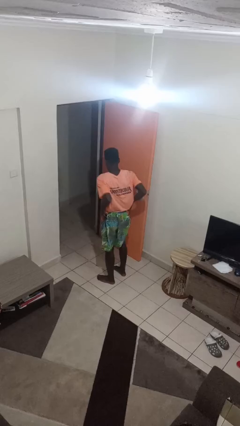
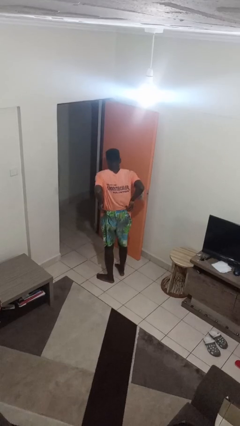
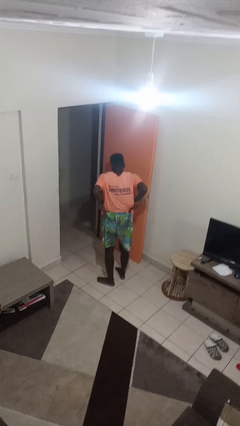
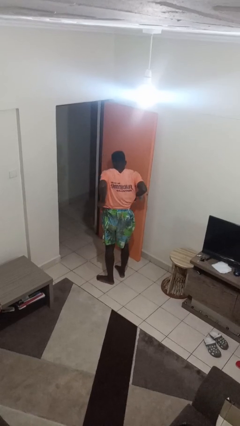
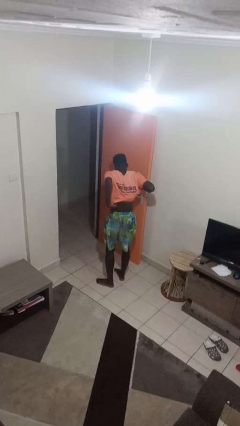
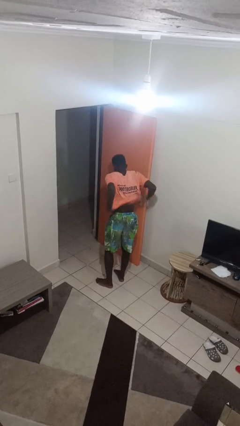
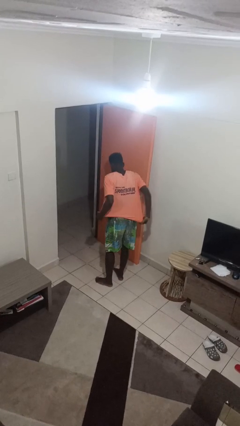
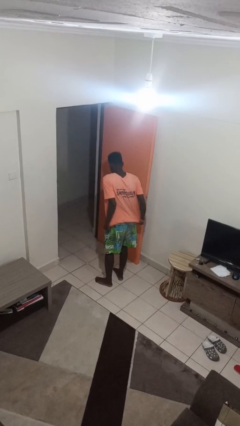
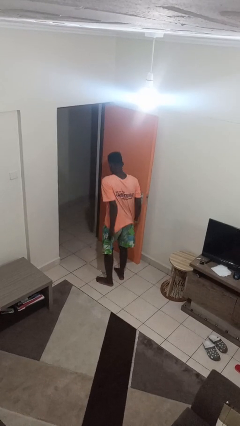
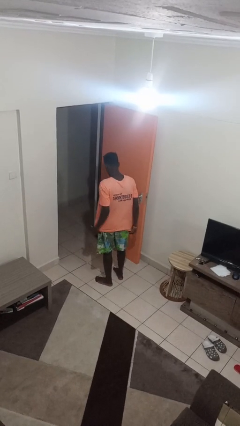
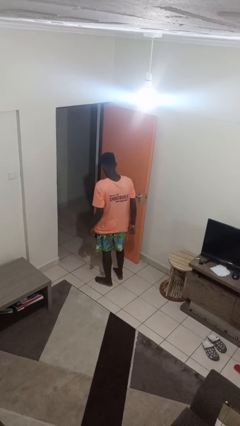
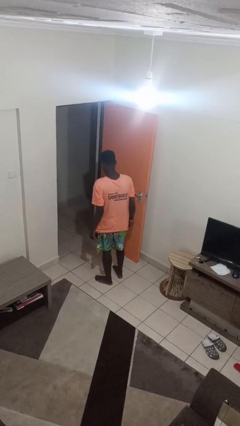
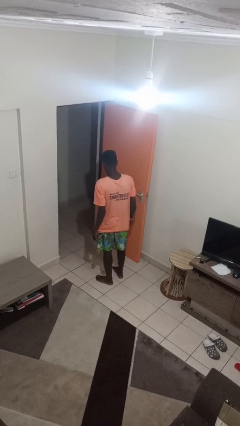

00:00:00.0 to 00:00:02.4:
person untucks shirt

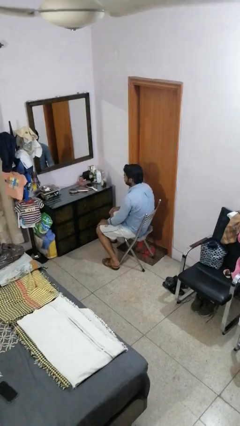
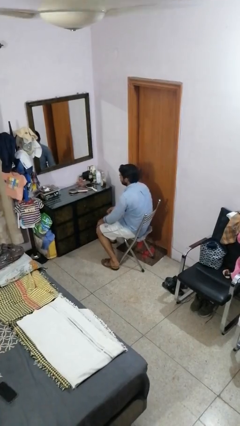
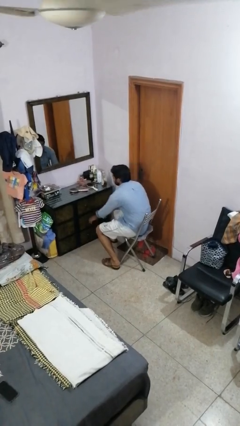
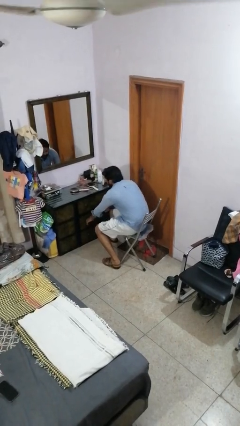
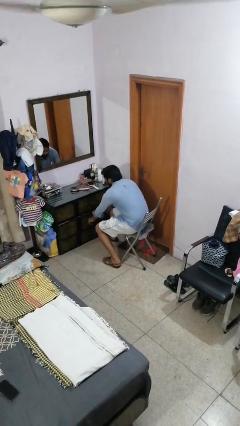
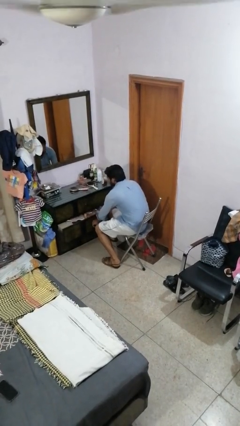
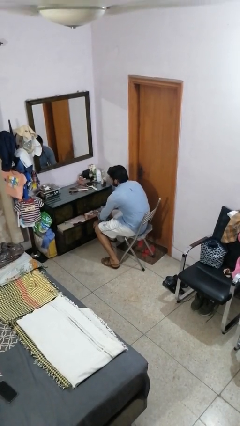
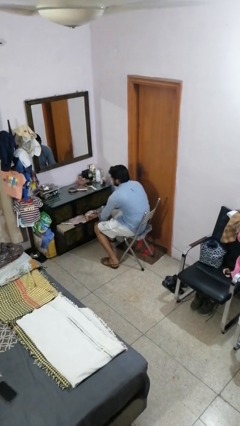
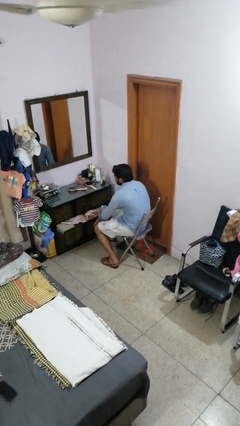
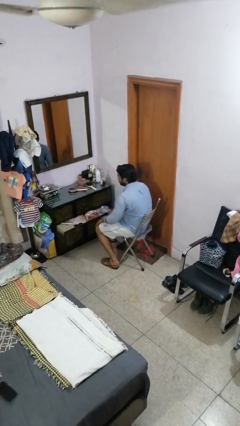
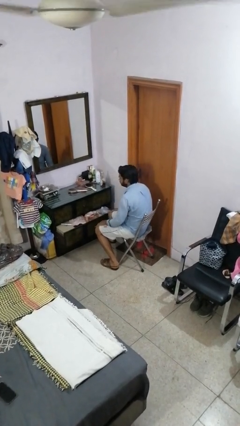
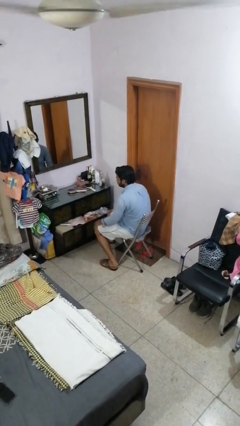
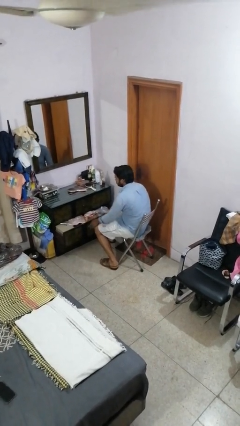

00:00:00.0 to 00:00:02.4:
person opens dresser drawer

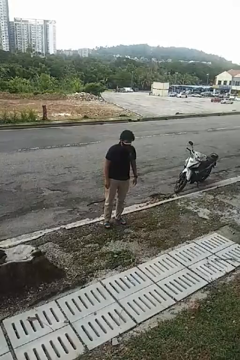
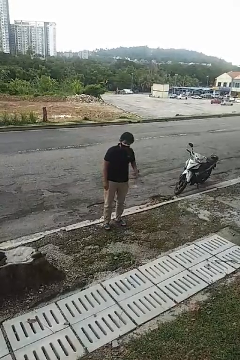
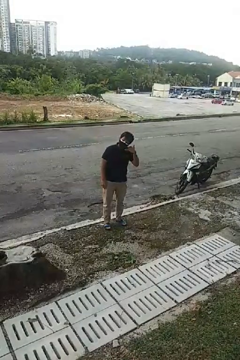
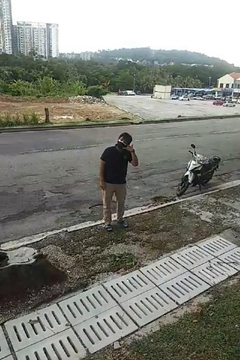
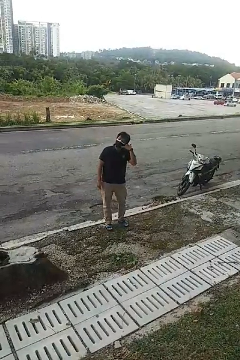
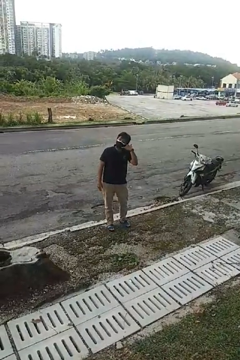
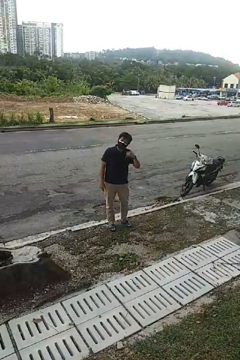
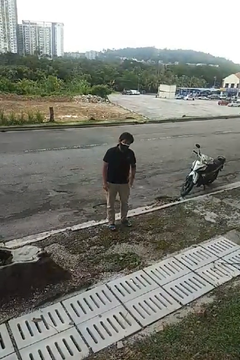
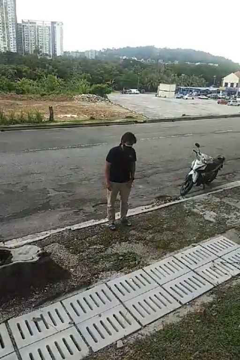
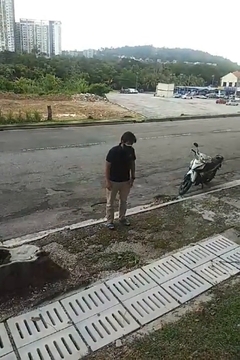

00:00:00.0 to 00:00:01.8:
person gestures call me

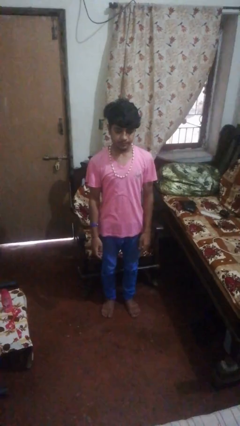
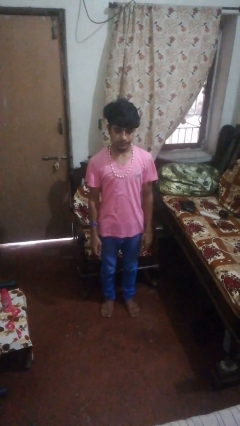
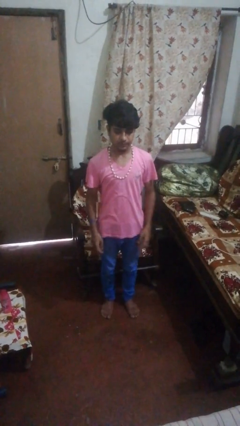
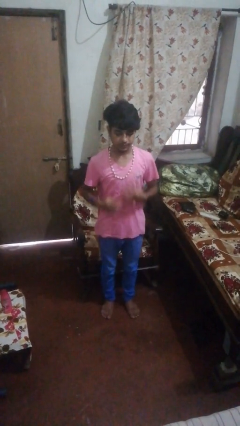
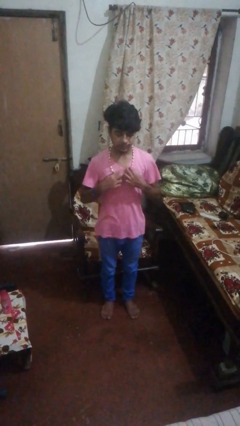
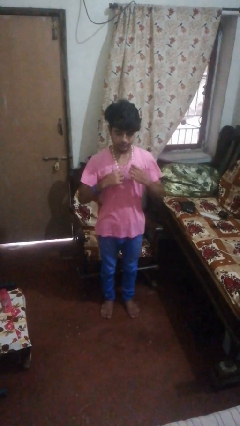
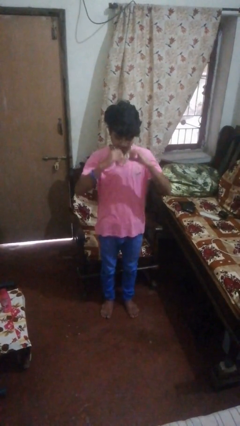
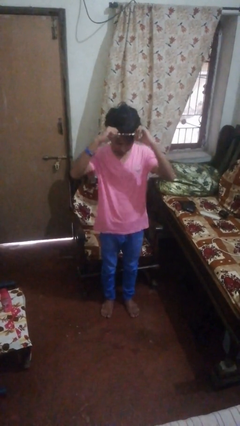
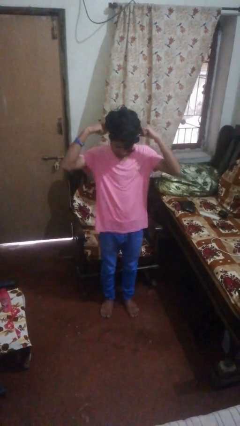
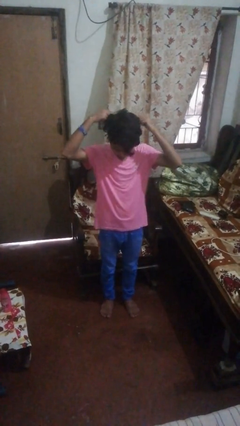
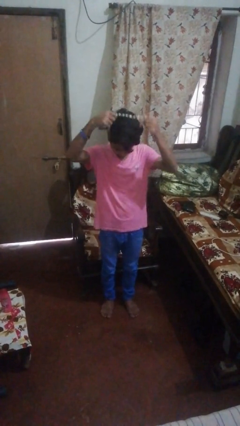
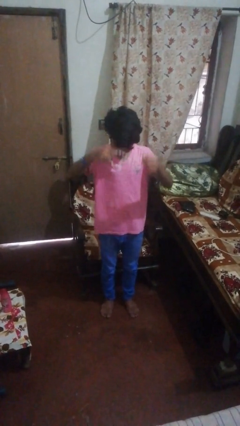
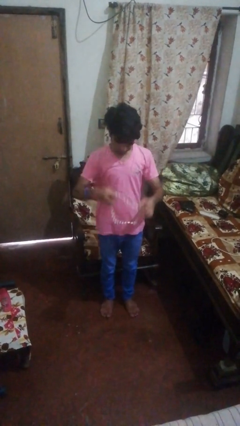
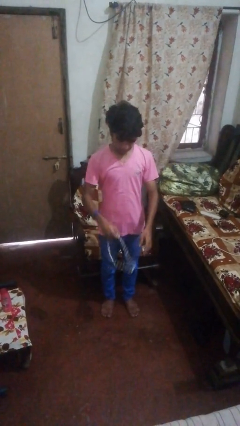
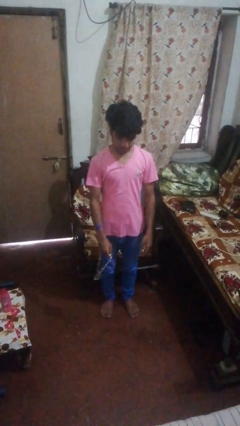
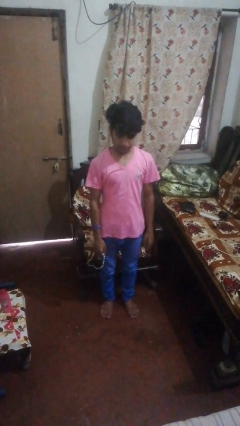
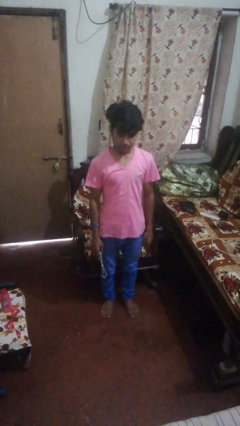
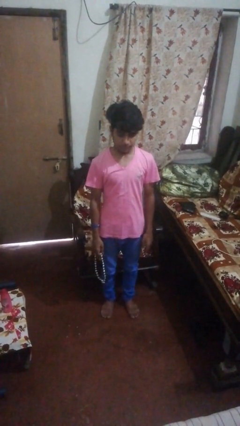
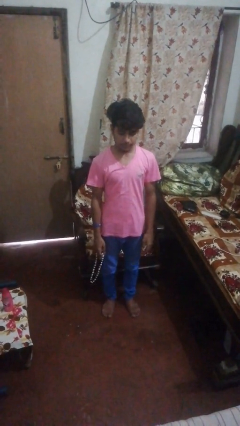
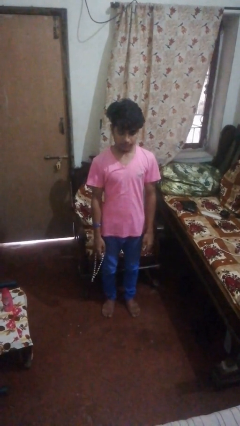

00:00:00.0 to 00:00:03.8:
person takes off necklace

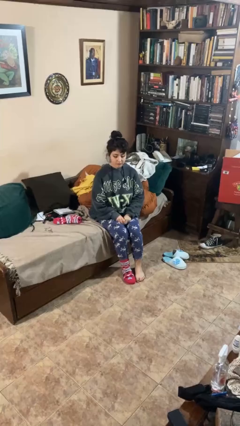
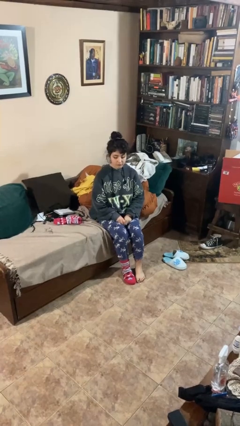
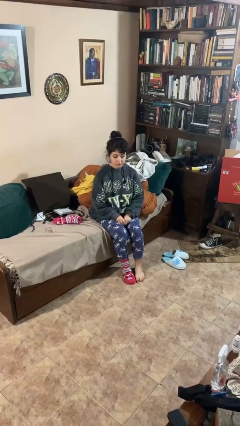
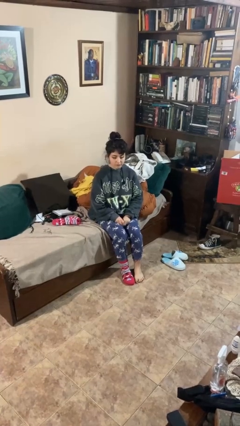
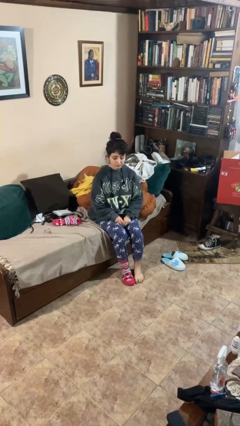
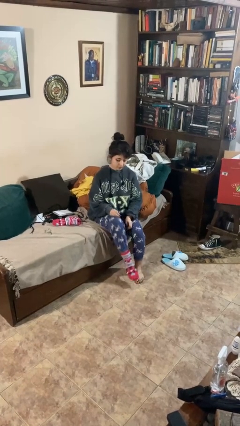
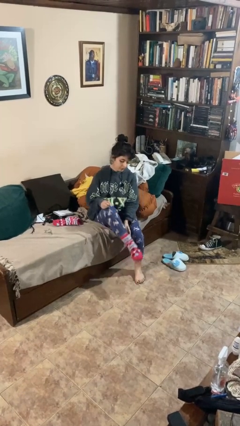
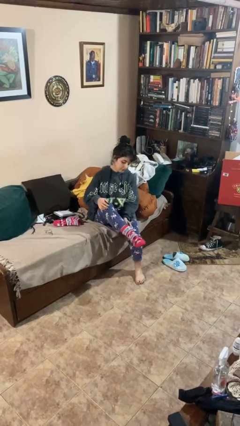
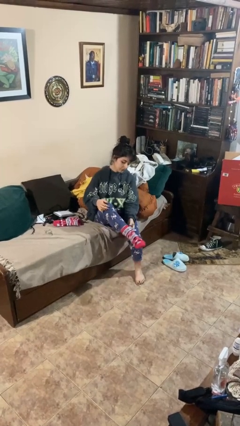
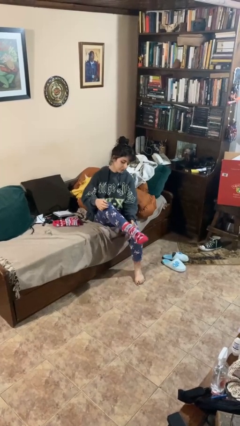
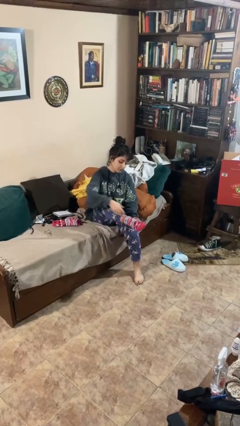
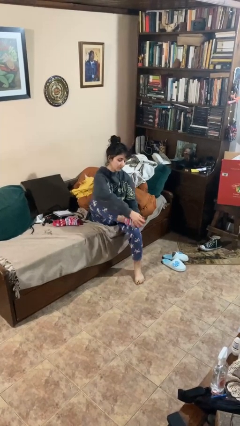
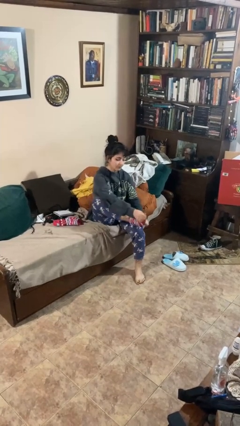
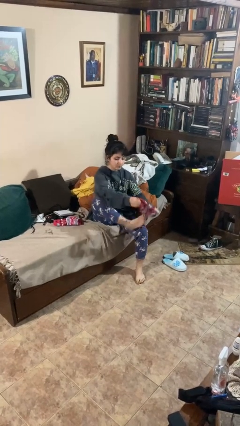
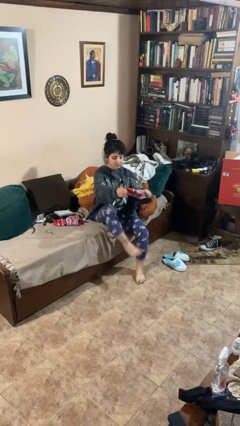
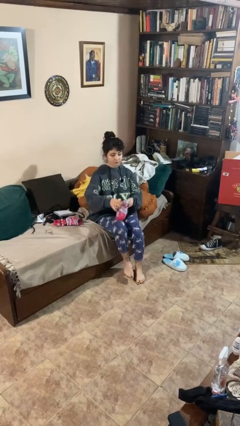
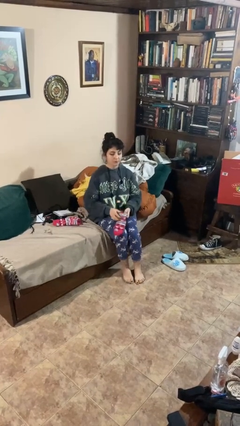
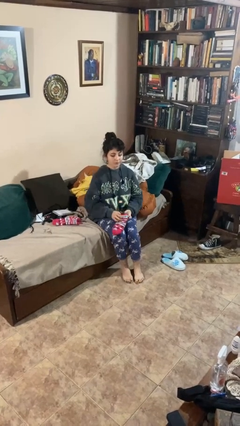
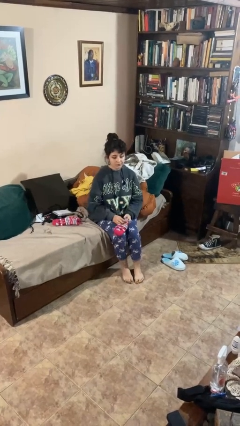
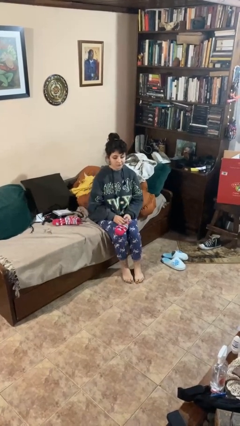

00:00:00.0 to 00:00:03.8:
person takes off socks

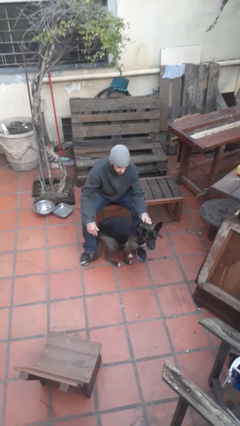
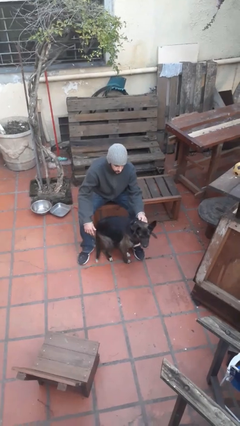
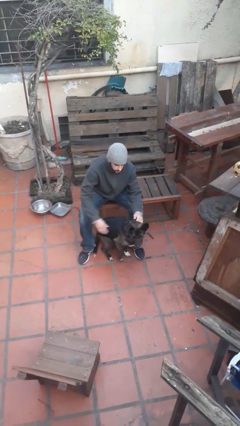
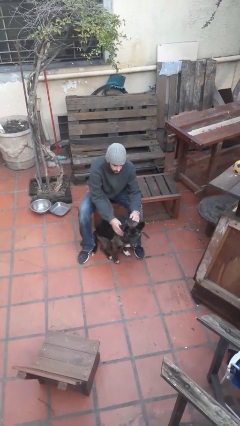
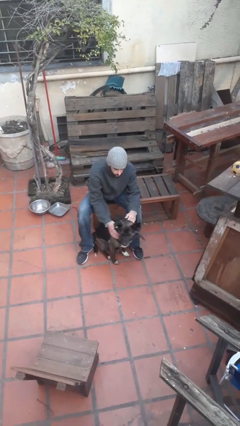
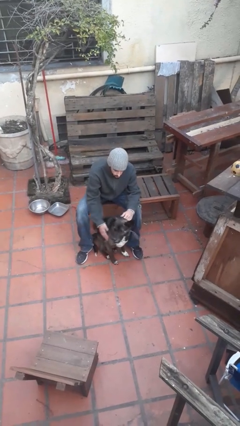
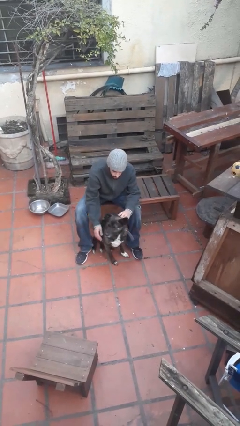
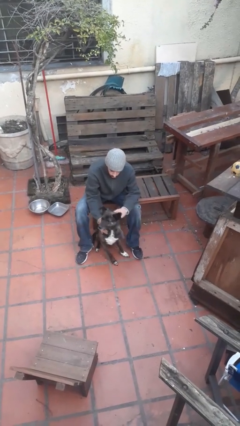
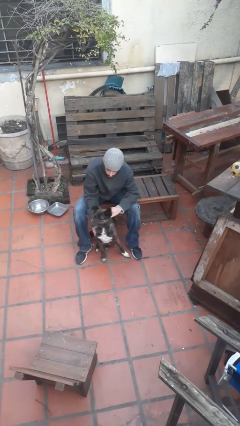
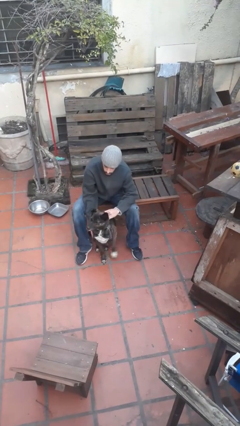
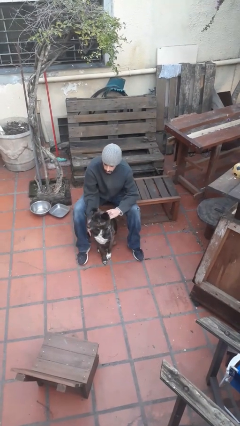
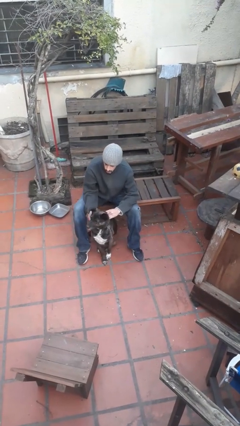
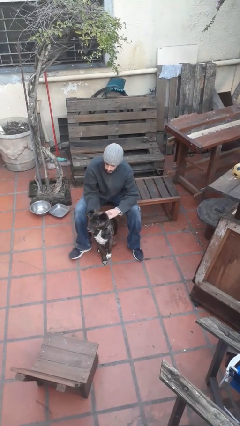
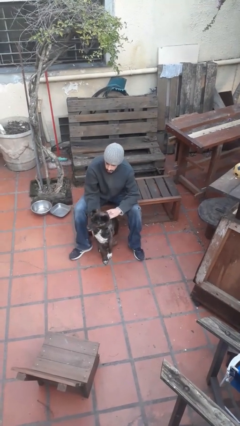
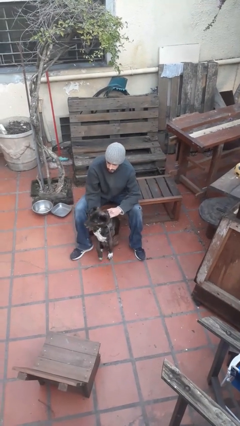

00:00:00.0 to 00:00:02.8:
person pets dog

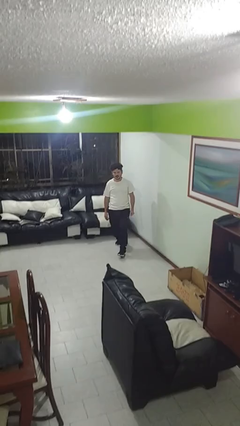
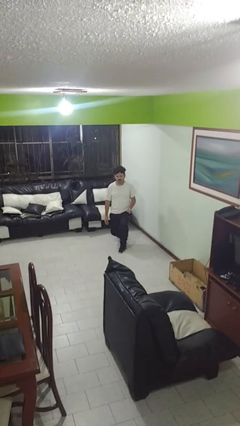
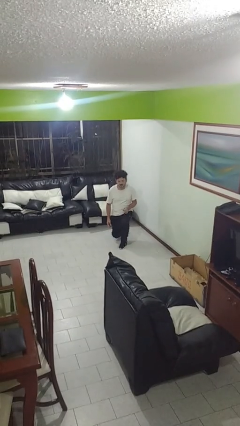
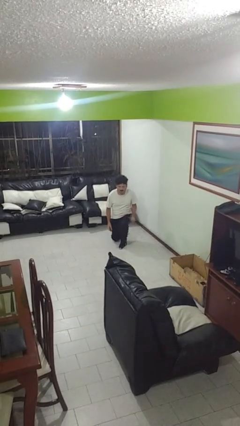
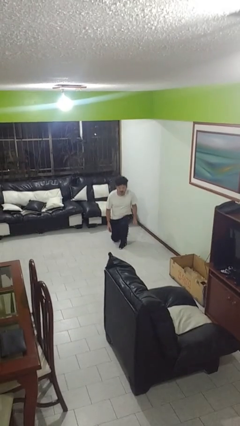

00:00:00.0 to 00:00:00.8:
person kneels
